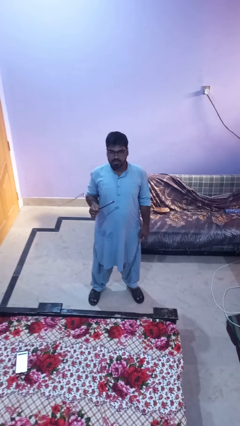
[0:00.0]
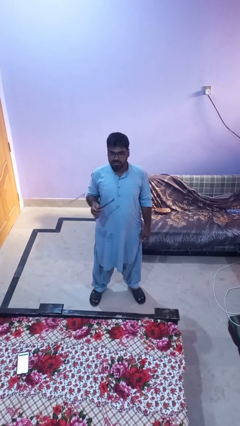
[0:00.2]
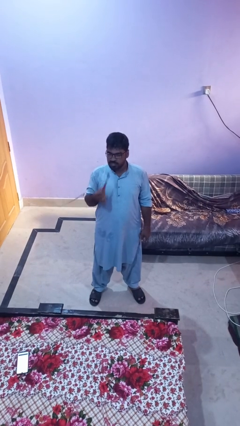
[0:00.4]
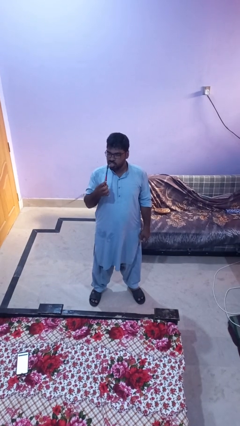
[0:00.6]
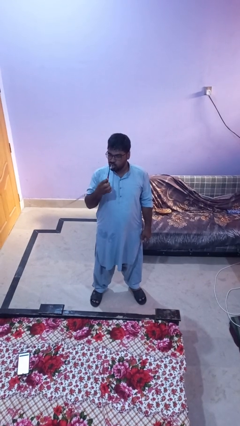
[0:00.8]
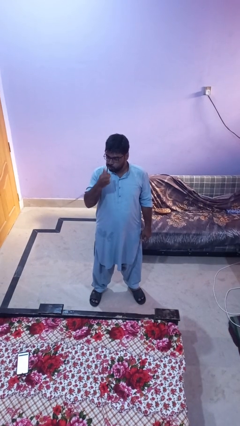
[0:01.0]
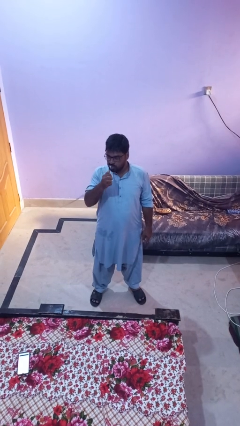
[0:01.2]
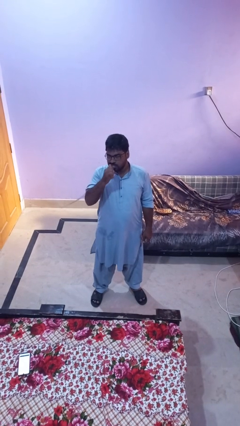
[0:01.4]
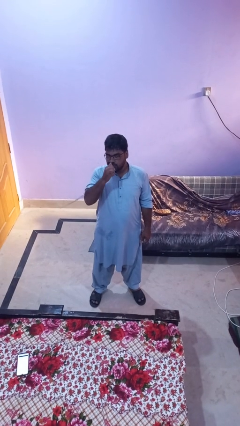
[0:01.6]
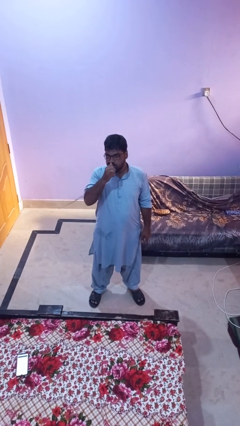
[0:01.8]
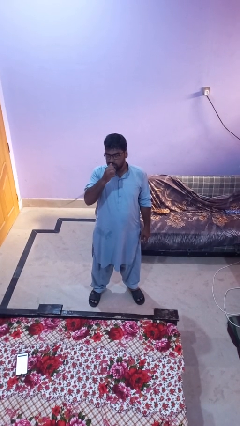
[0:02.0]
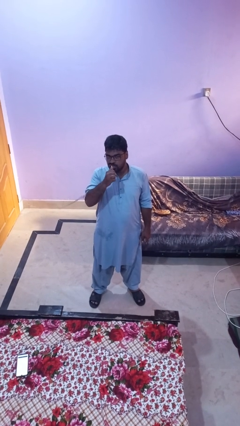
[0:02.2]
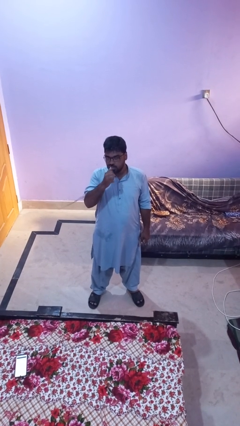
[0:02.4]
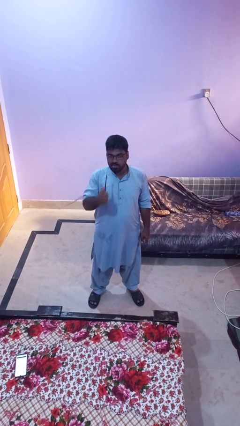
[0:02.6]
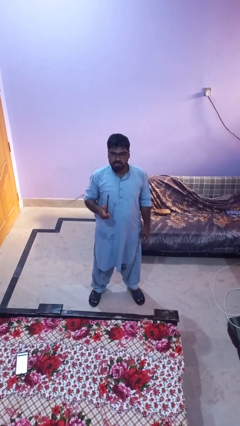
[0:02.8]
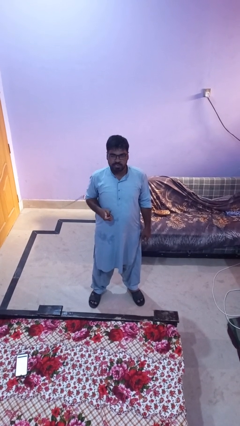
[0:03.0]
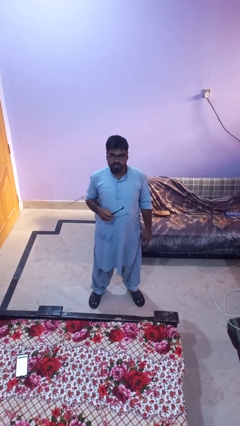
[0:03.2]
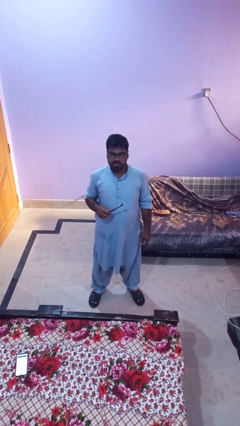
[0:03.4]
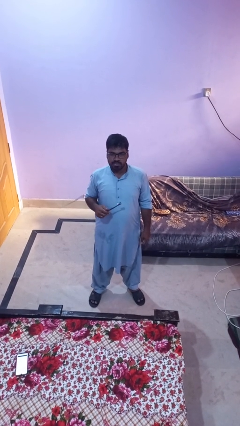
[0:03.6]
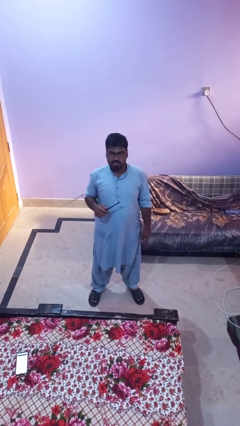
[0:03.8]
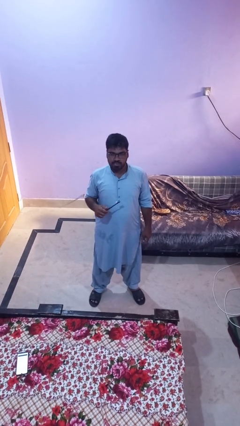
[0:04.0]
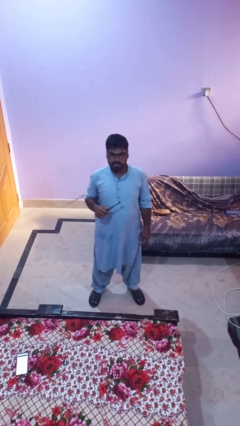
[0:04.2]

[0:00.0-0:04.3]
person brushes teeth

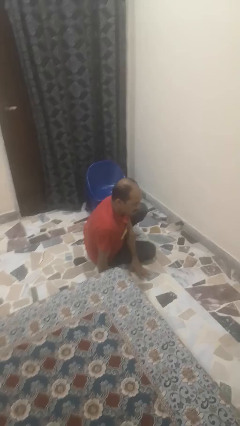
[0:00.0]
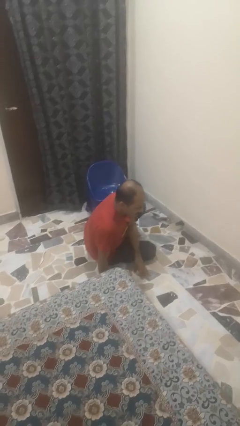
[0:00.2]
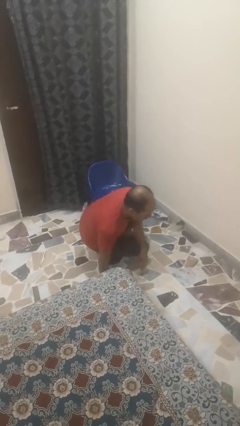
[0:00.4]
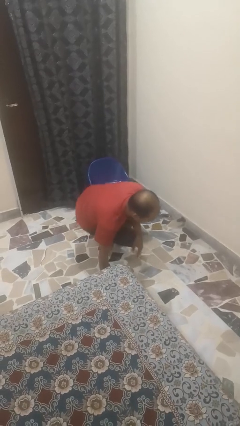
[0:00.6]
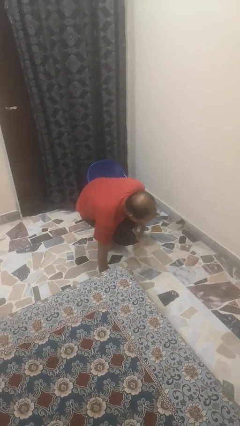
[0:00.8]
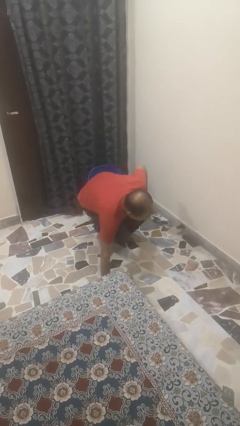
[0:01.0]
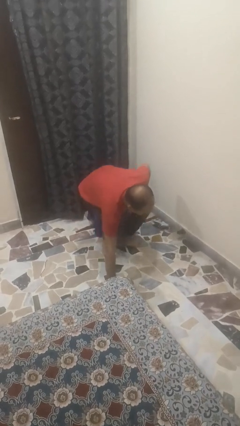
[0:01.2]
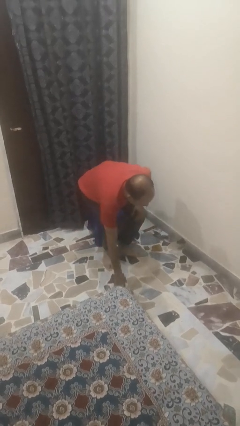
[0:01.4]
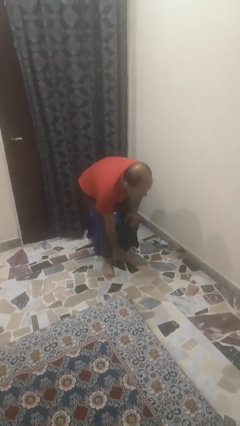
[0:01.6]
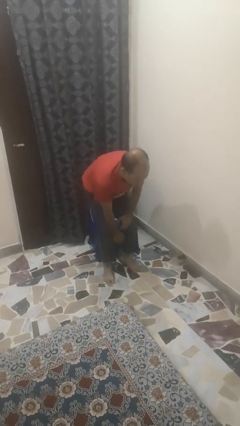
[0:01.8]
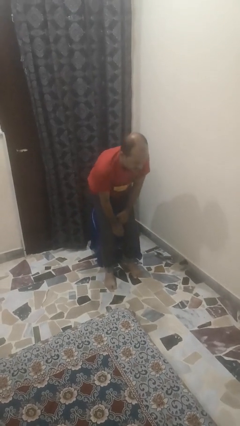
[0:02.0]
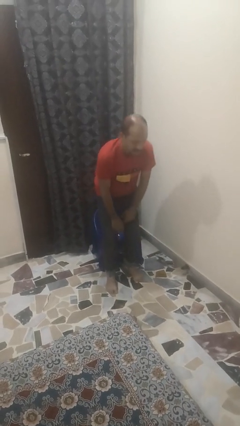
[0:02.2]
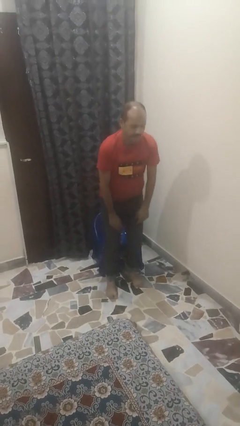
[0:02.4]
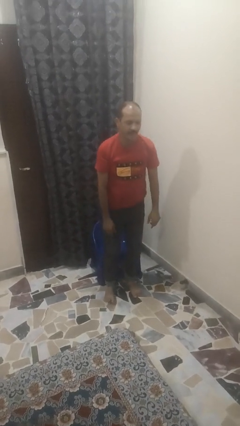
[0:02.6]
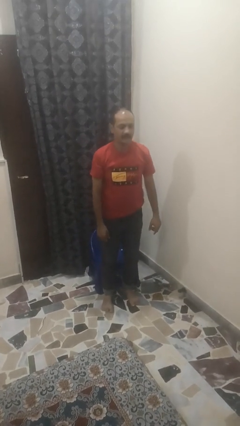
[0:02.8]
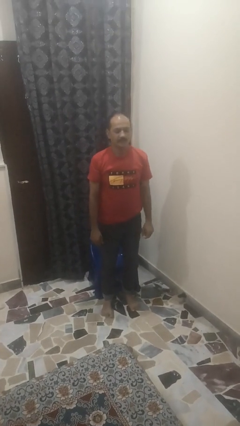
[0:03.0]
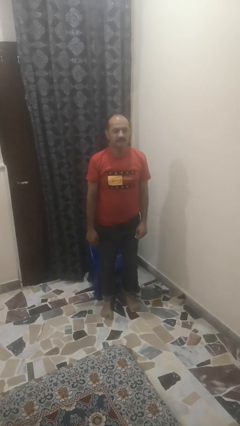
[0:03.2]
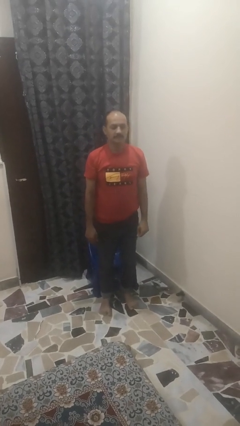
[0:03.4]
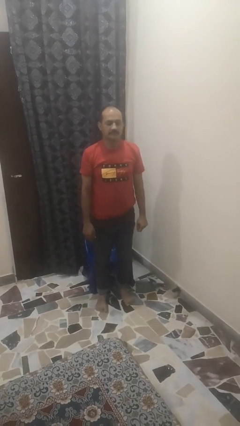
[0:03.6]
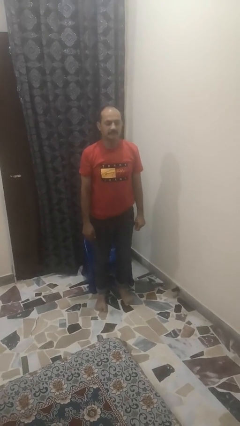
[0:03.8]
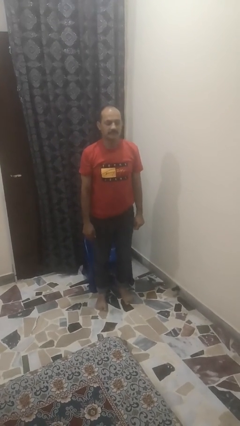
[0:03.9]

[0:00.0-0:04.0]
person stands up from floor

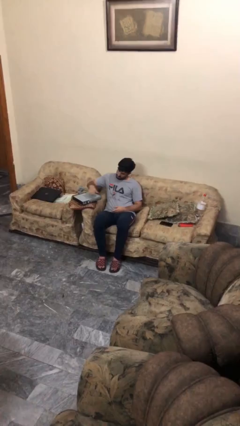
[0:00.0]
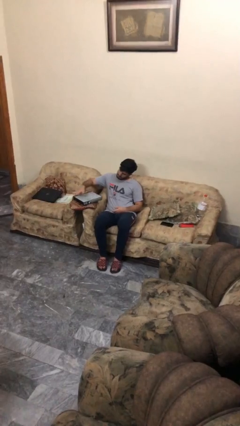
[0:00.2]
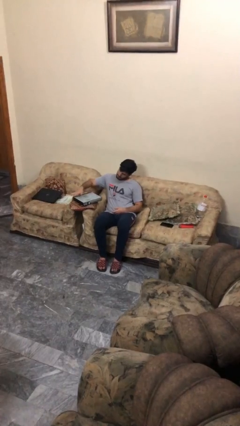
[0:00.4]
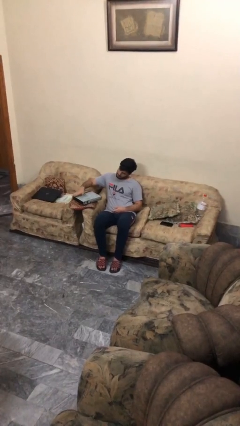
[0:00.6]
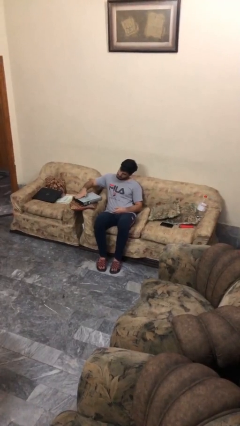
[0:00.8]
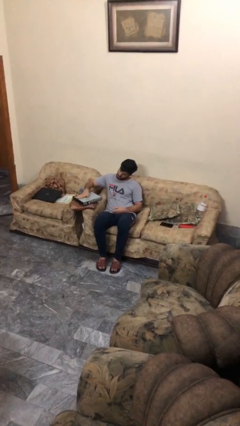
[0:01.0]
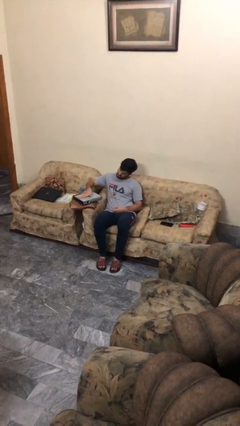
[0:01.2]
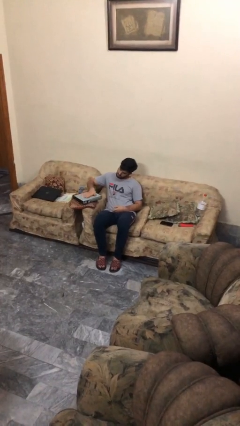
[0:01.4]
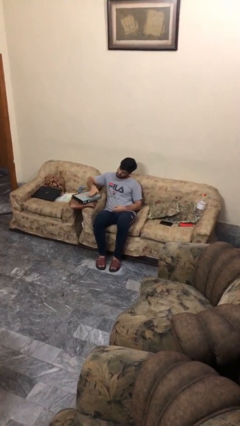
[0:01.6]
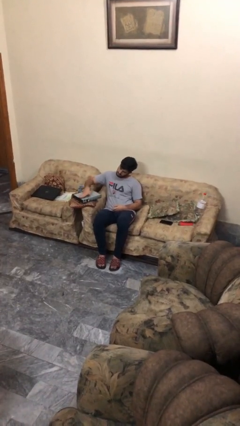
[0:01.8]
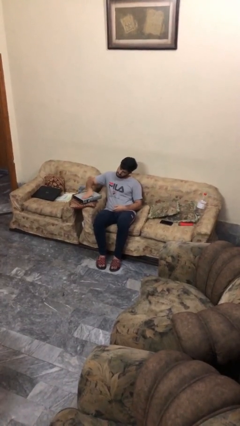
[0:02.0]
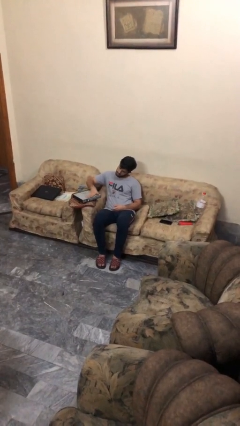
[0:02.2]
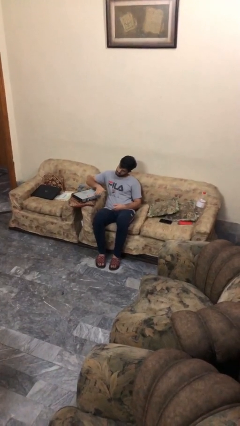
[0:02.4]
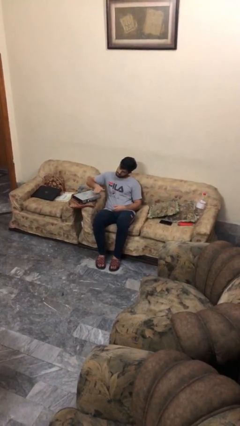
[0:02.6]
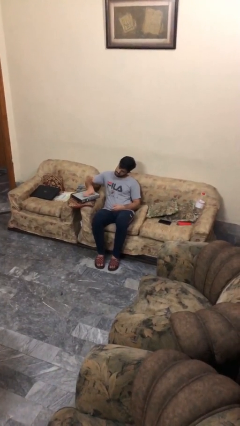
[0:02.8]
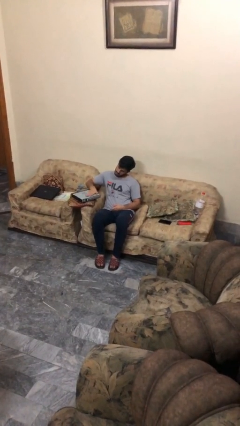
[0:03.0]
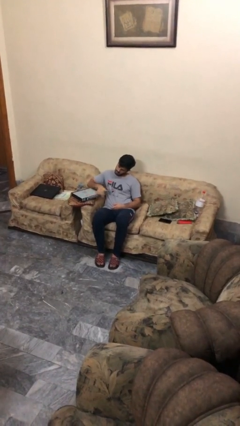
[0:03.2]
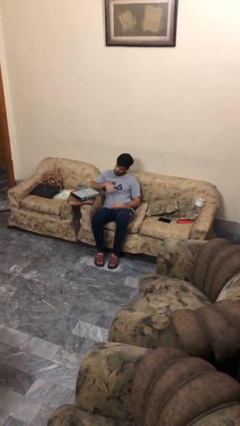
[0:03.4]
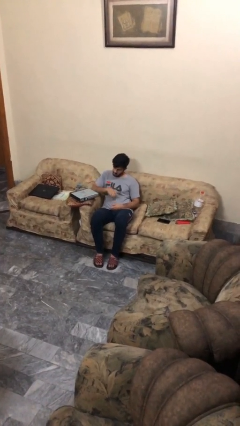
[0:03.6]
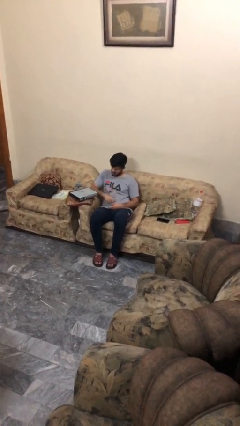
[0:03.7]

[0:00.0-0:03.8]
person waves hand over object

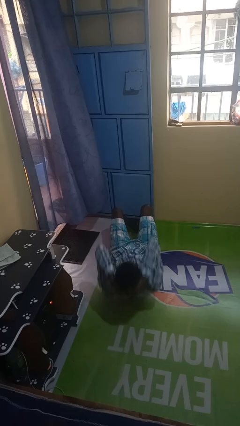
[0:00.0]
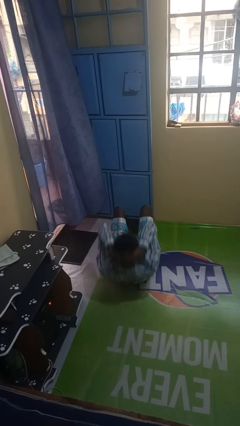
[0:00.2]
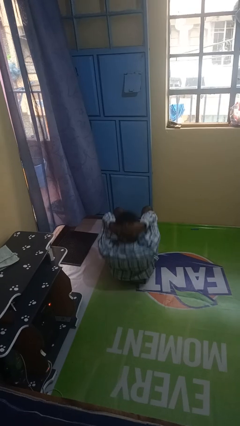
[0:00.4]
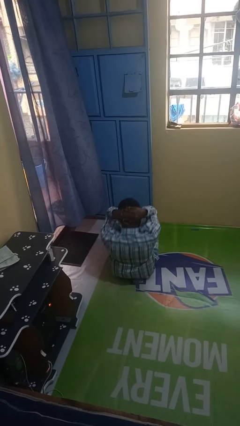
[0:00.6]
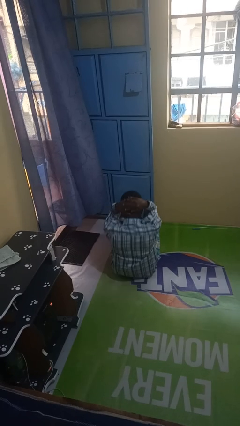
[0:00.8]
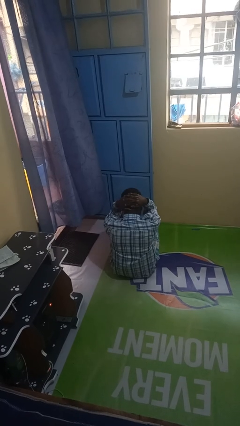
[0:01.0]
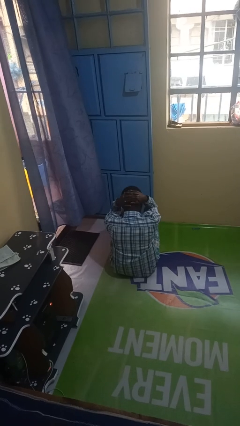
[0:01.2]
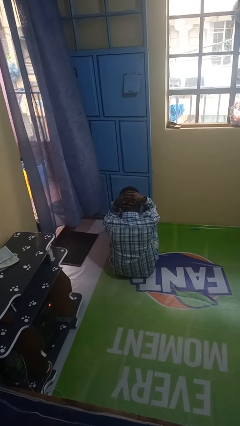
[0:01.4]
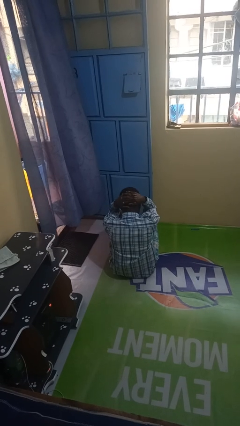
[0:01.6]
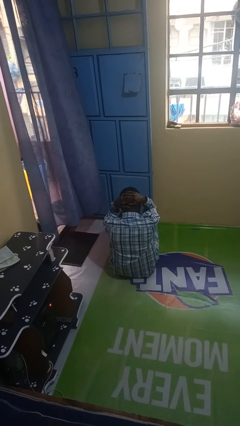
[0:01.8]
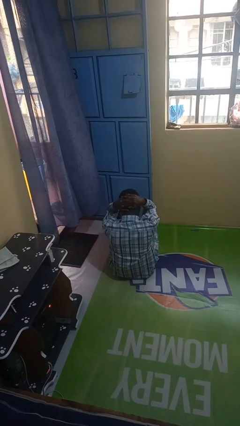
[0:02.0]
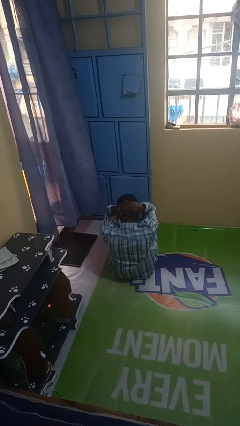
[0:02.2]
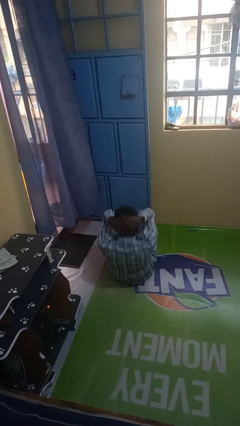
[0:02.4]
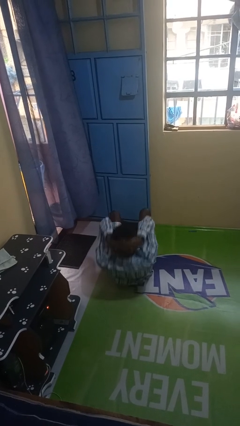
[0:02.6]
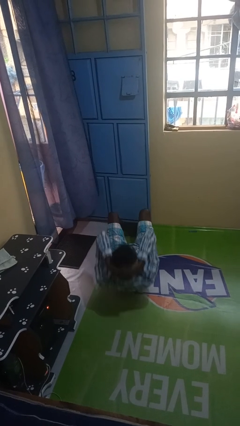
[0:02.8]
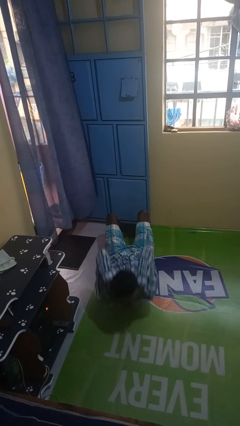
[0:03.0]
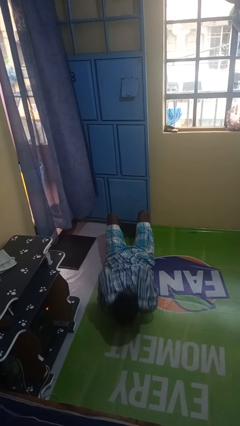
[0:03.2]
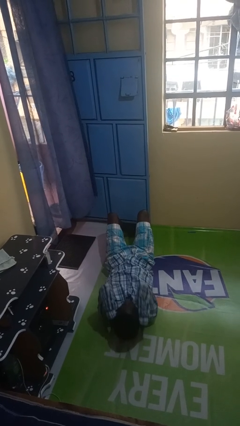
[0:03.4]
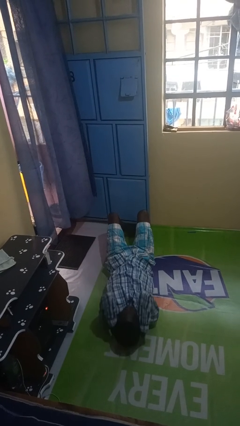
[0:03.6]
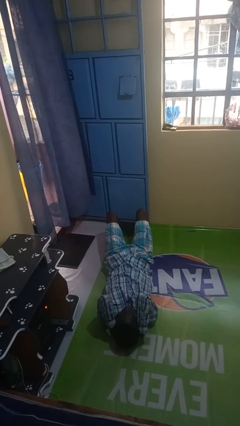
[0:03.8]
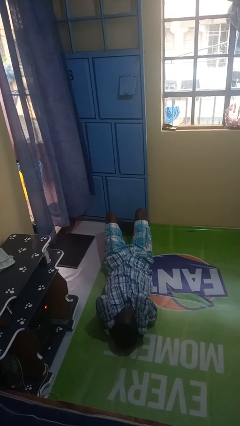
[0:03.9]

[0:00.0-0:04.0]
person exercises with situp

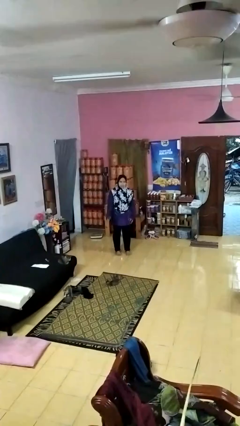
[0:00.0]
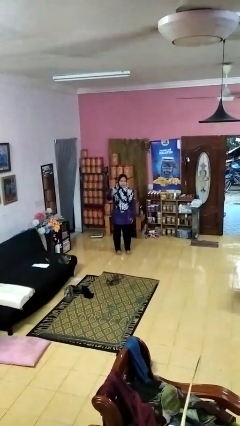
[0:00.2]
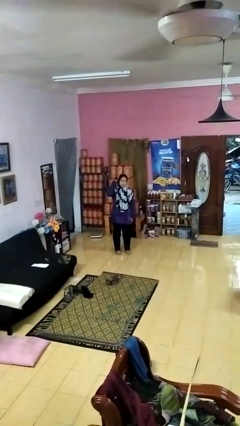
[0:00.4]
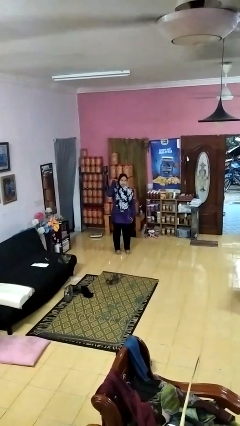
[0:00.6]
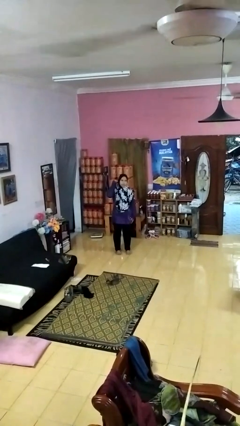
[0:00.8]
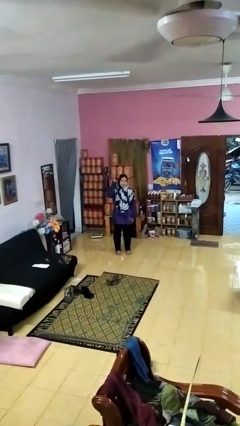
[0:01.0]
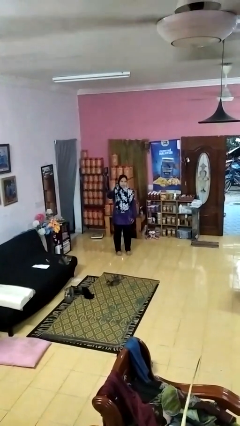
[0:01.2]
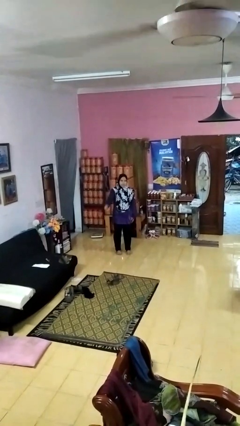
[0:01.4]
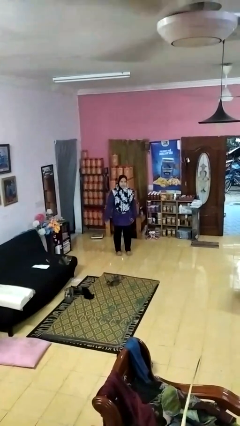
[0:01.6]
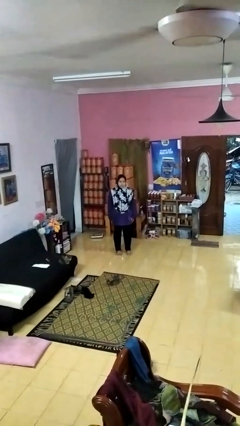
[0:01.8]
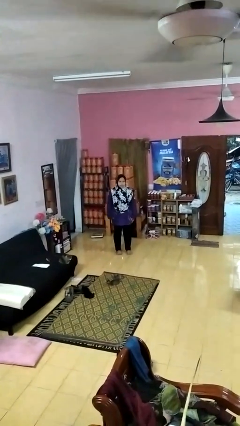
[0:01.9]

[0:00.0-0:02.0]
person gestures behind me
